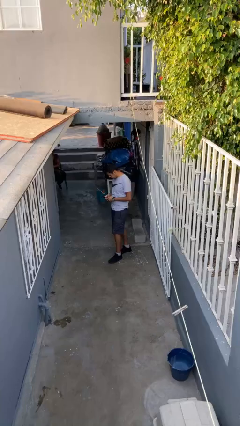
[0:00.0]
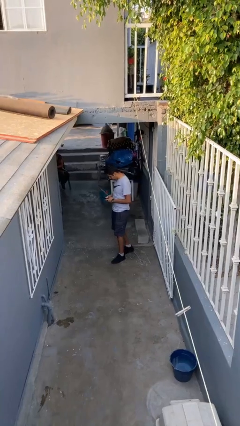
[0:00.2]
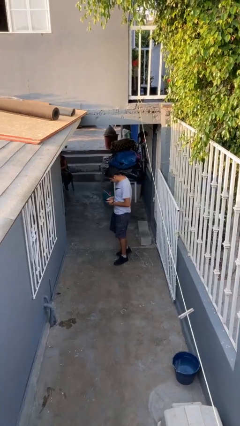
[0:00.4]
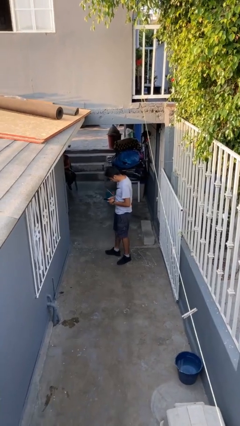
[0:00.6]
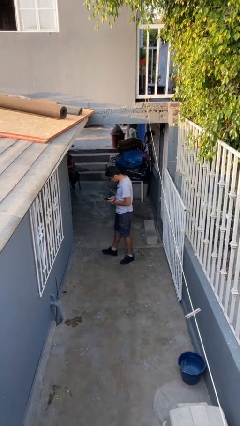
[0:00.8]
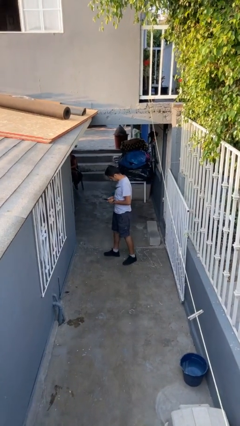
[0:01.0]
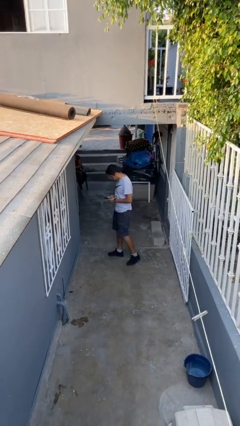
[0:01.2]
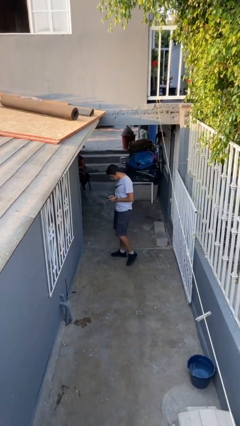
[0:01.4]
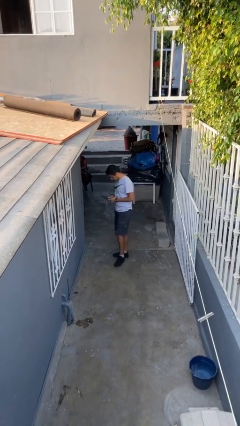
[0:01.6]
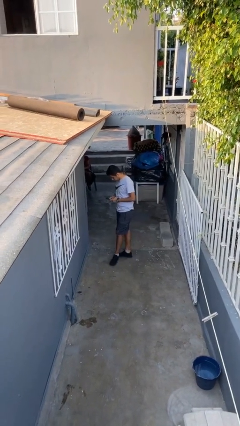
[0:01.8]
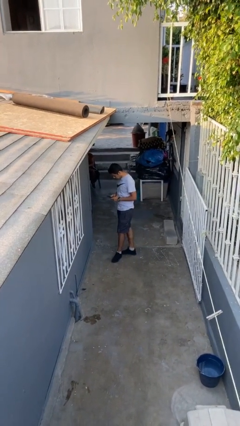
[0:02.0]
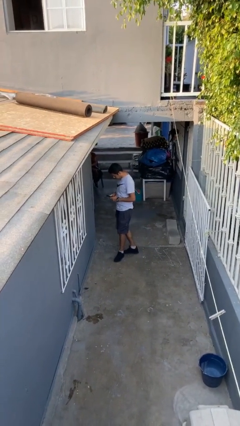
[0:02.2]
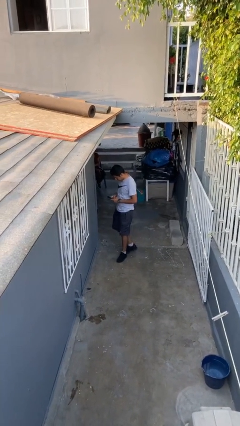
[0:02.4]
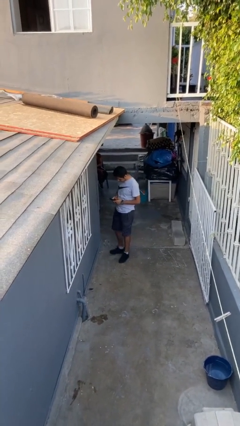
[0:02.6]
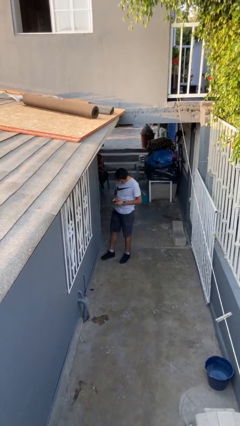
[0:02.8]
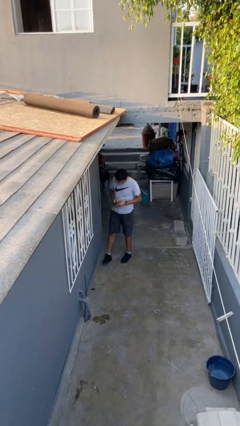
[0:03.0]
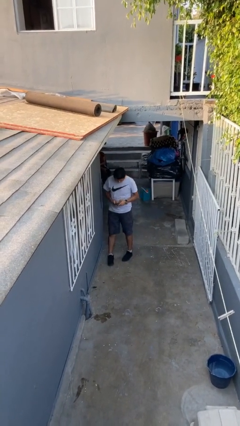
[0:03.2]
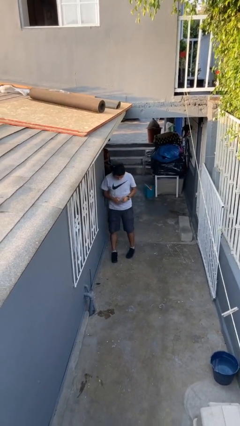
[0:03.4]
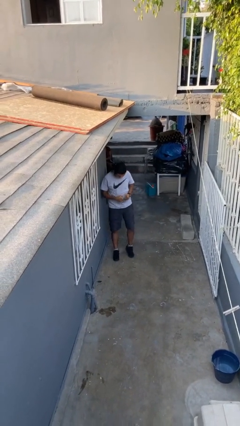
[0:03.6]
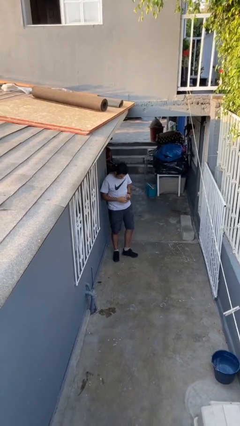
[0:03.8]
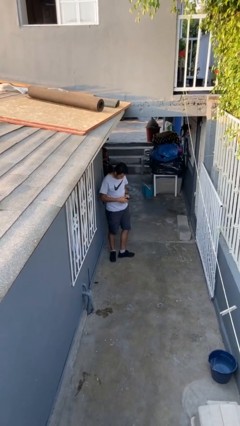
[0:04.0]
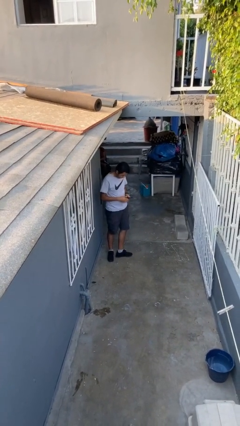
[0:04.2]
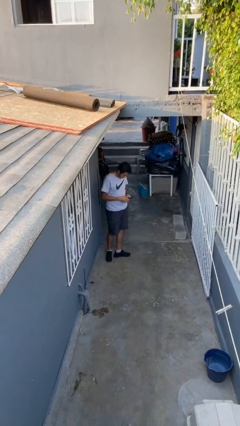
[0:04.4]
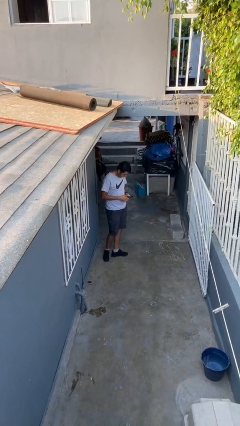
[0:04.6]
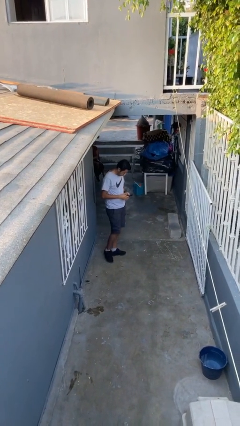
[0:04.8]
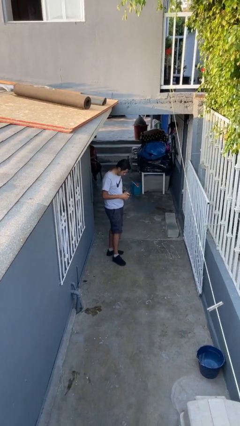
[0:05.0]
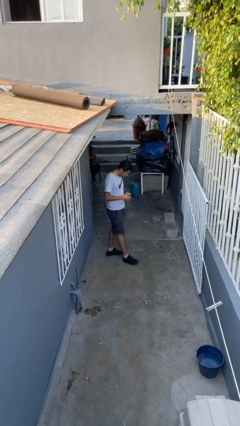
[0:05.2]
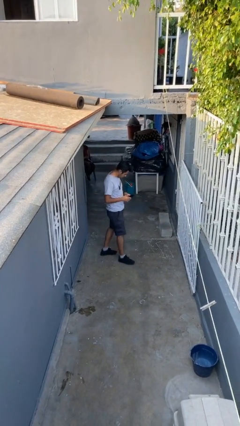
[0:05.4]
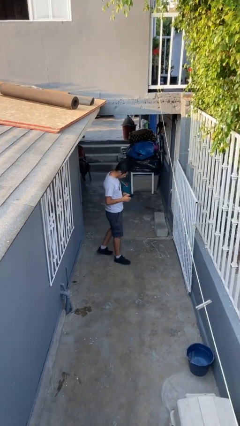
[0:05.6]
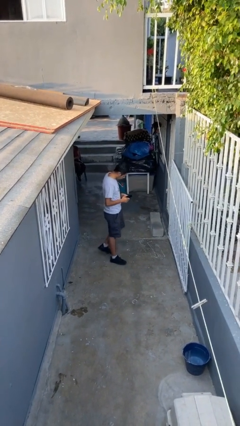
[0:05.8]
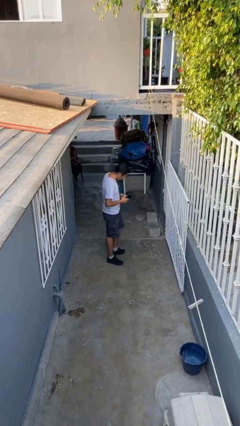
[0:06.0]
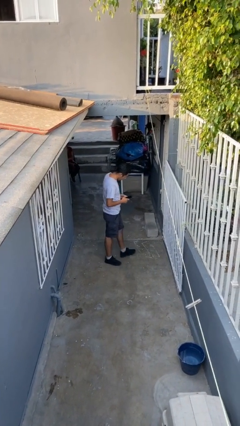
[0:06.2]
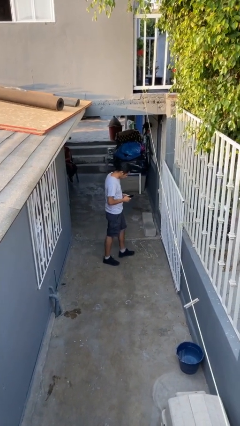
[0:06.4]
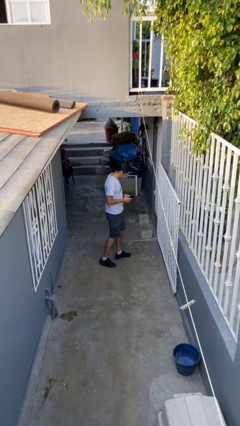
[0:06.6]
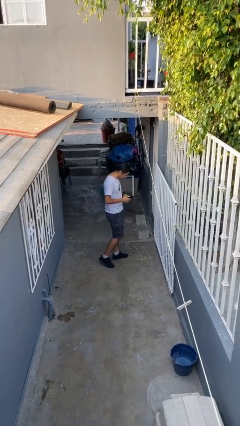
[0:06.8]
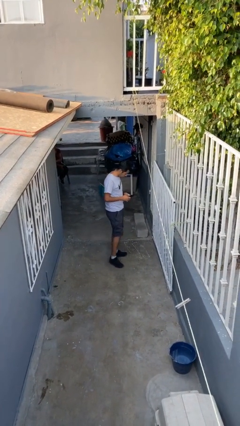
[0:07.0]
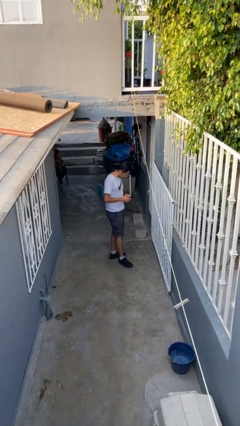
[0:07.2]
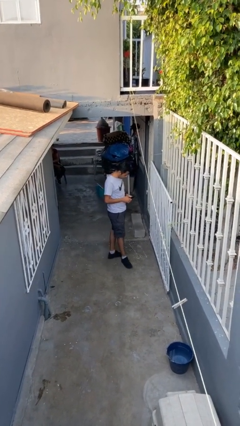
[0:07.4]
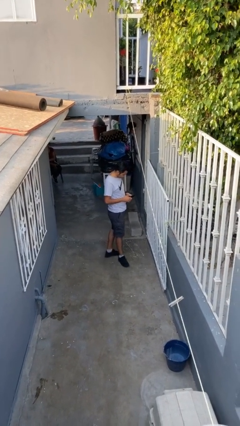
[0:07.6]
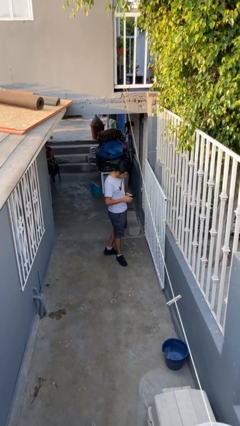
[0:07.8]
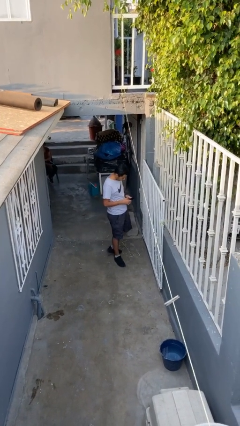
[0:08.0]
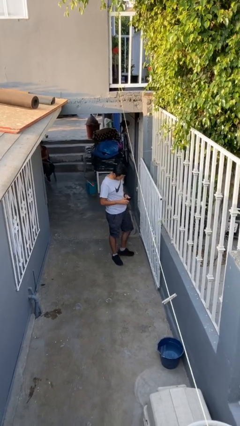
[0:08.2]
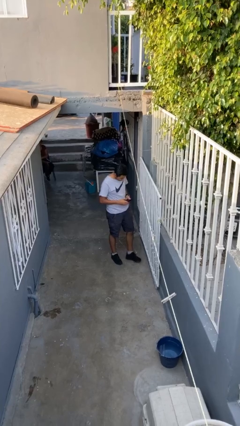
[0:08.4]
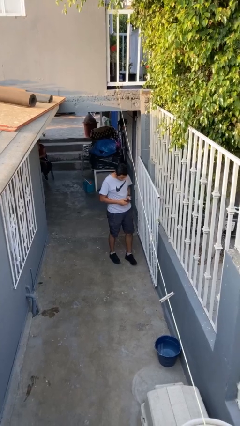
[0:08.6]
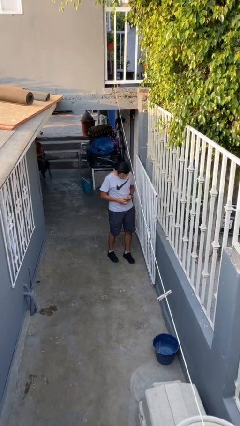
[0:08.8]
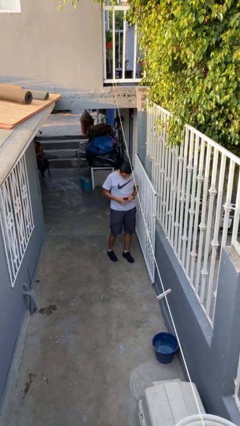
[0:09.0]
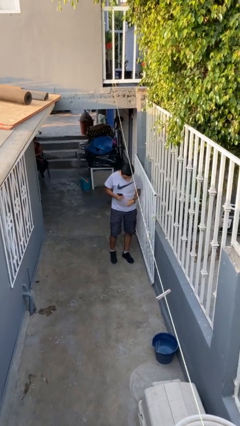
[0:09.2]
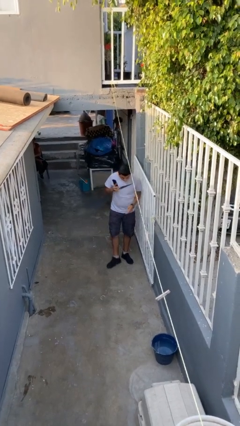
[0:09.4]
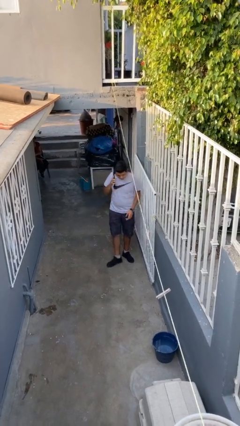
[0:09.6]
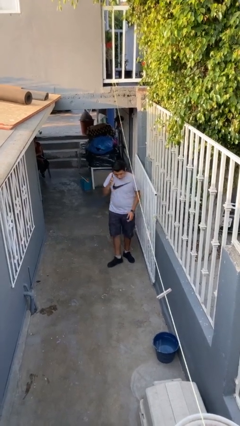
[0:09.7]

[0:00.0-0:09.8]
person texts on phone

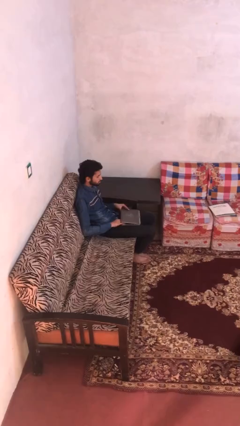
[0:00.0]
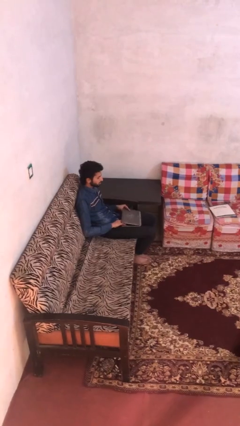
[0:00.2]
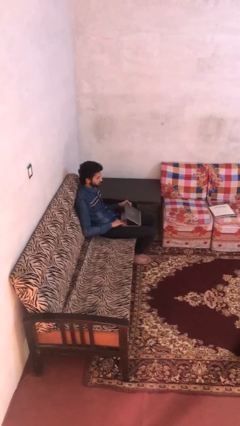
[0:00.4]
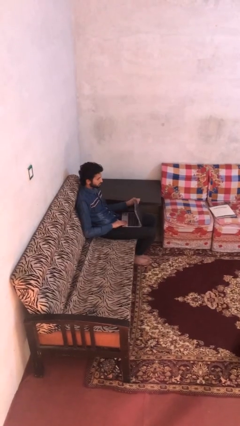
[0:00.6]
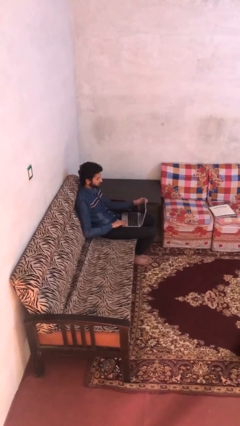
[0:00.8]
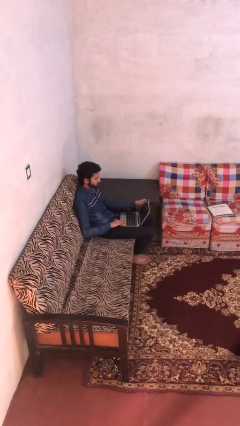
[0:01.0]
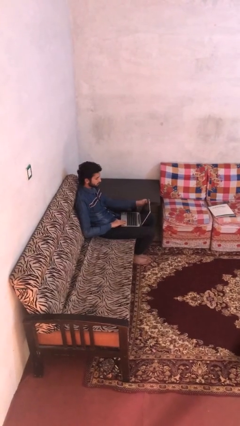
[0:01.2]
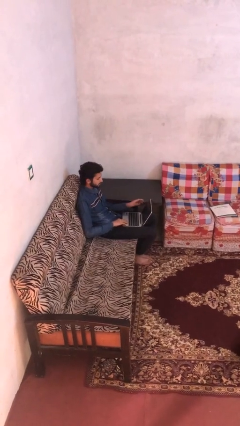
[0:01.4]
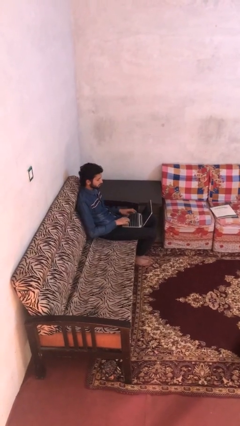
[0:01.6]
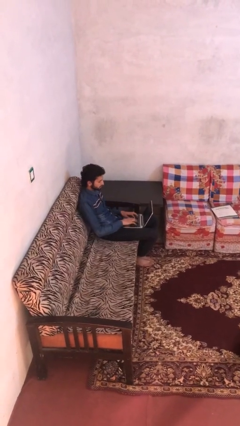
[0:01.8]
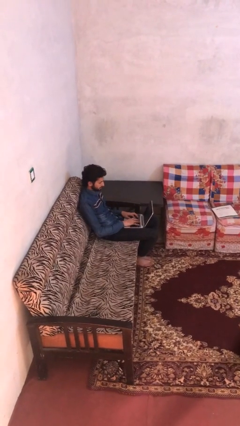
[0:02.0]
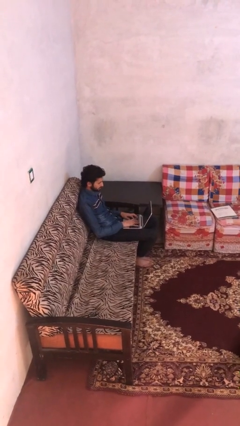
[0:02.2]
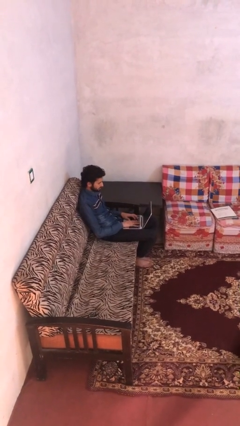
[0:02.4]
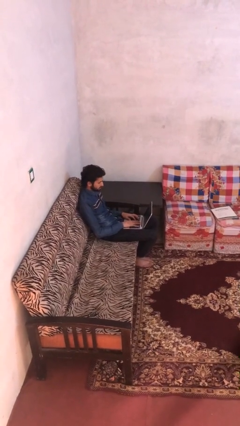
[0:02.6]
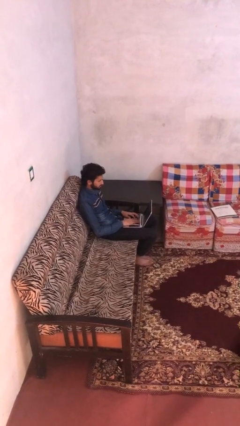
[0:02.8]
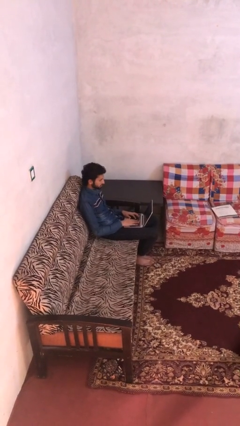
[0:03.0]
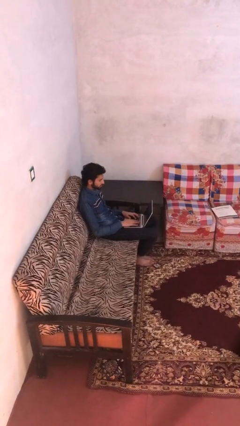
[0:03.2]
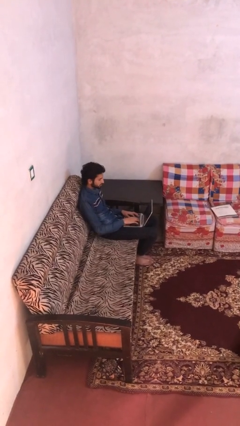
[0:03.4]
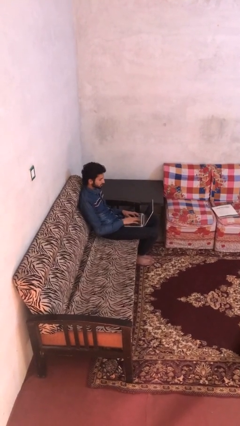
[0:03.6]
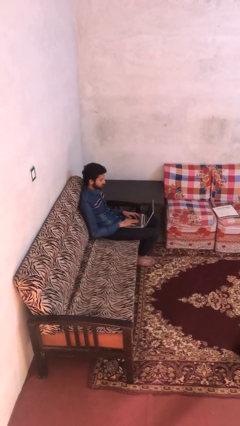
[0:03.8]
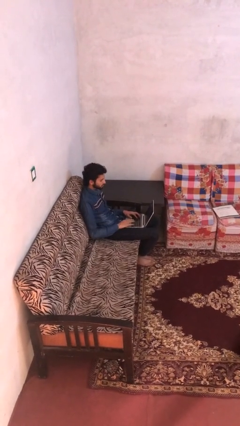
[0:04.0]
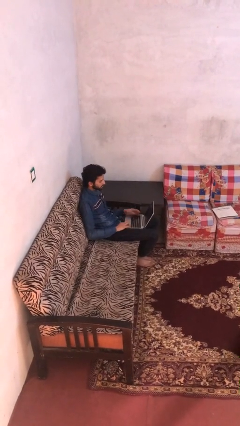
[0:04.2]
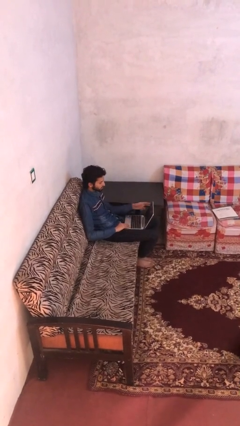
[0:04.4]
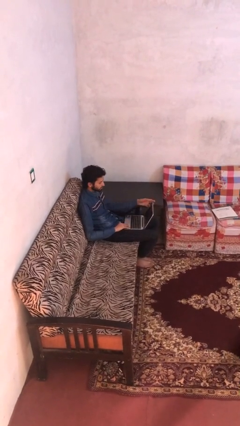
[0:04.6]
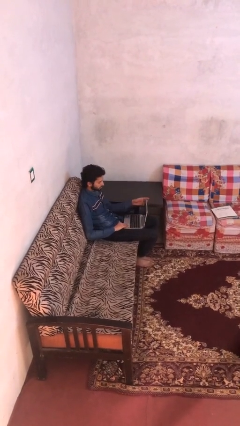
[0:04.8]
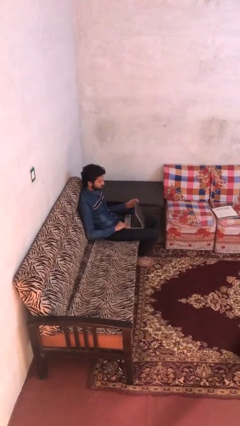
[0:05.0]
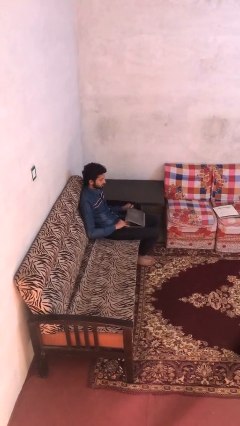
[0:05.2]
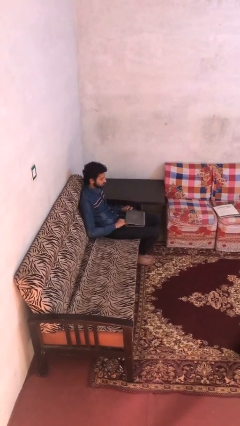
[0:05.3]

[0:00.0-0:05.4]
person interacts with laptop

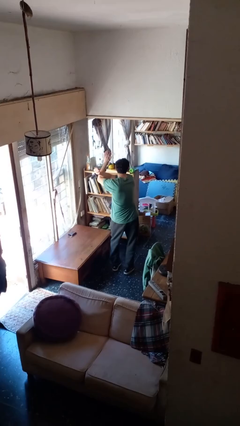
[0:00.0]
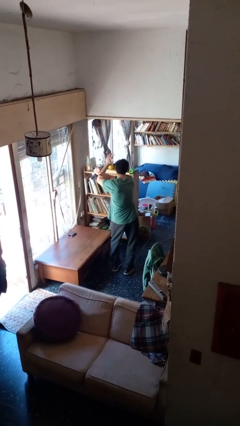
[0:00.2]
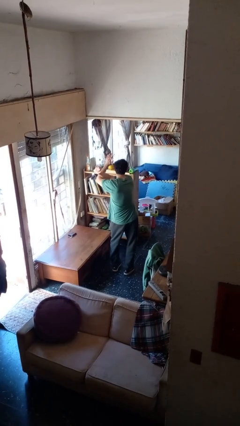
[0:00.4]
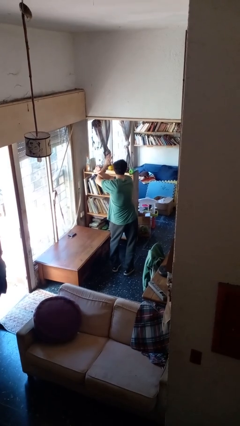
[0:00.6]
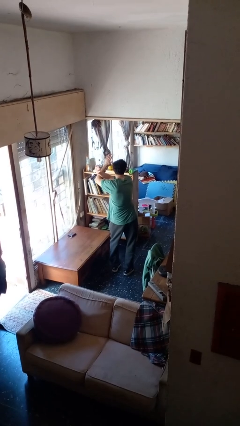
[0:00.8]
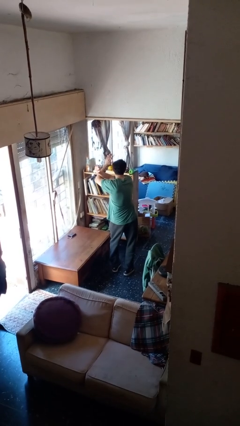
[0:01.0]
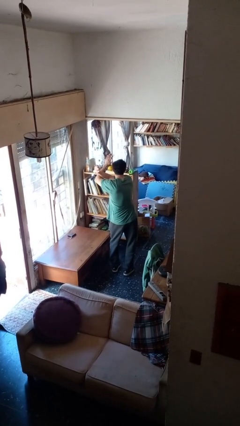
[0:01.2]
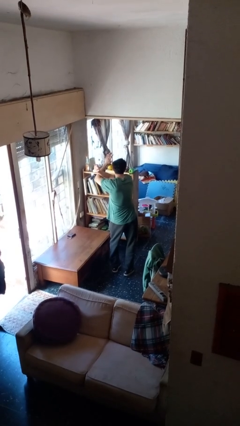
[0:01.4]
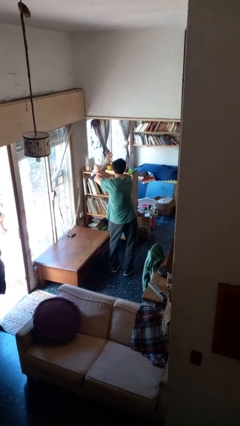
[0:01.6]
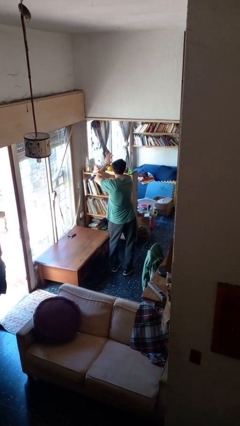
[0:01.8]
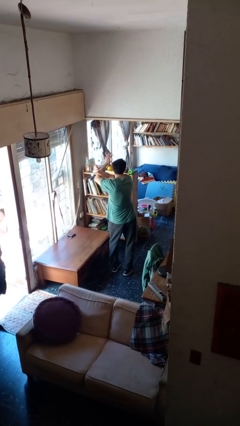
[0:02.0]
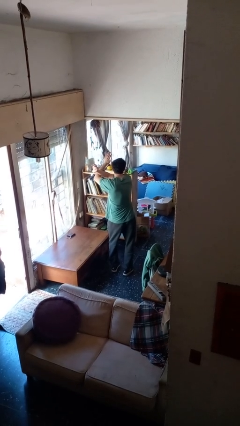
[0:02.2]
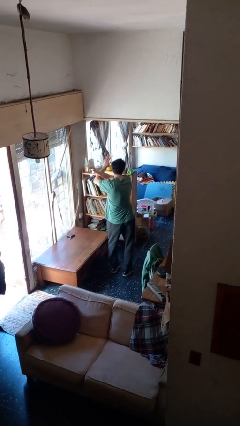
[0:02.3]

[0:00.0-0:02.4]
person gestures arms x
